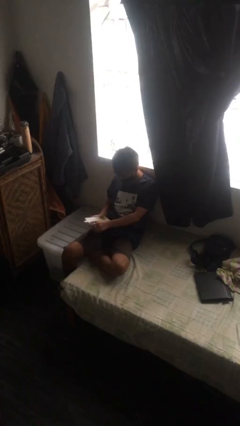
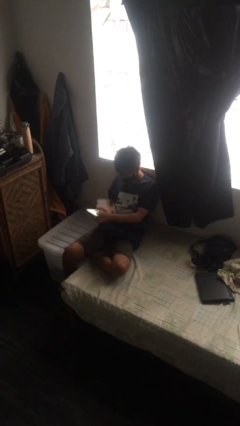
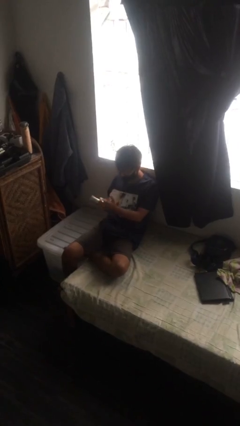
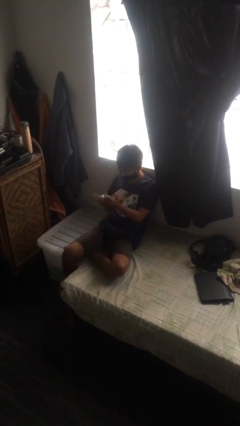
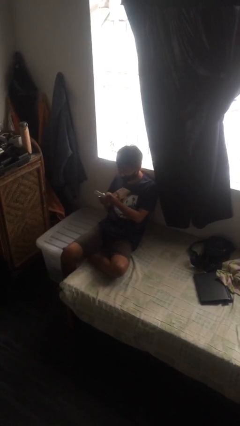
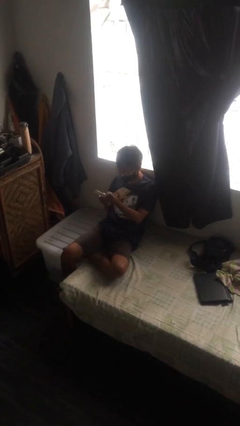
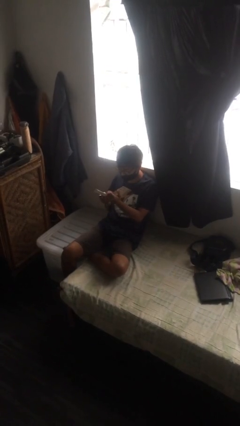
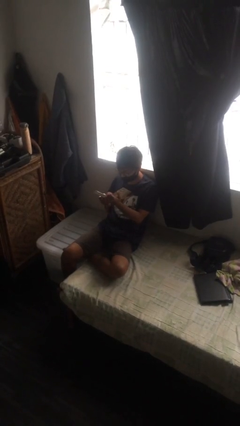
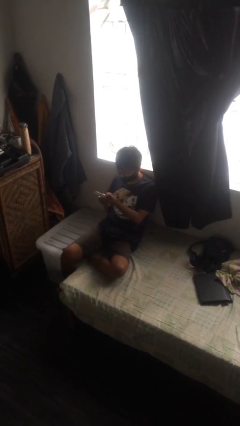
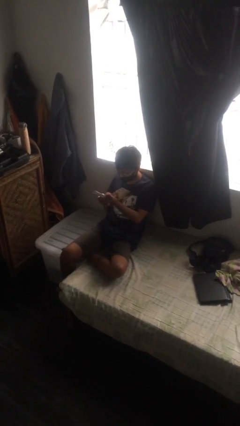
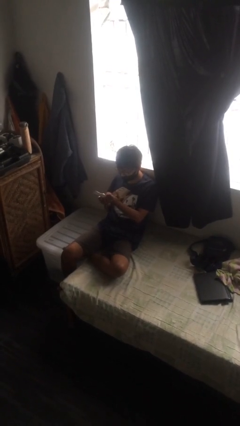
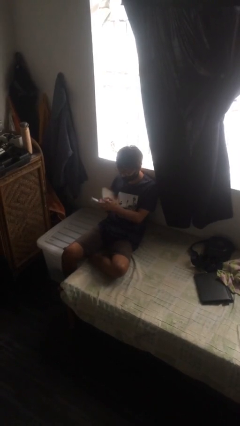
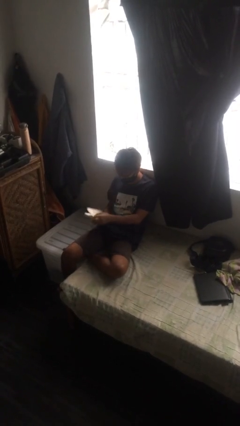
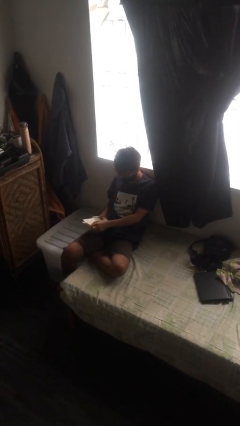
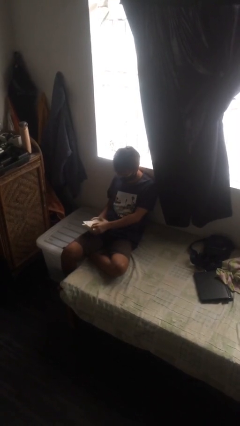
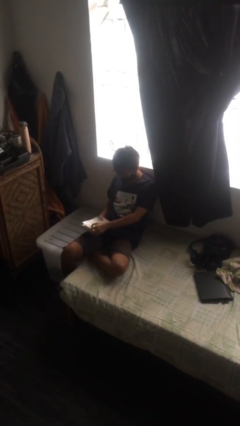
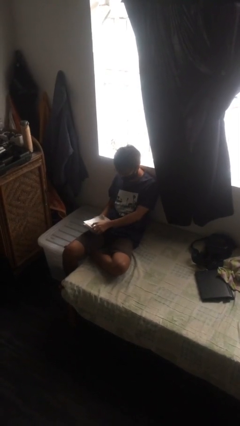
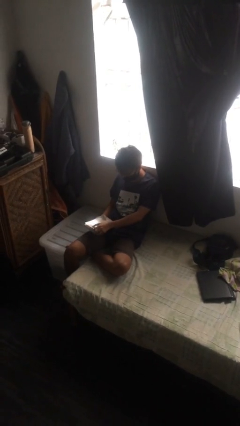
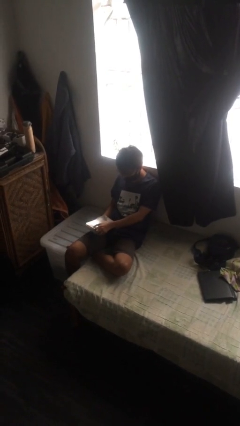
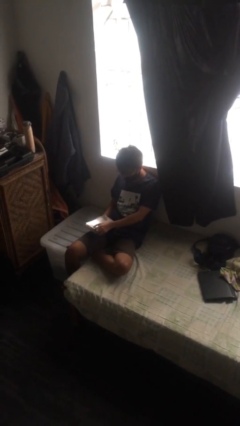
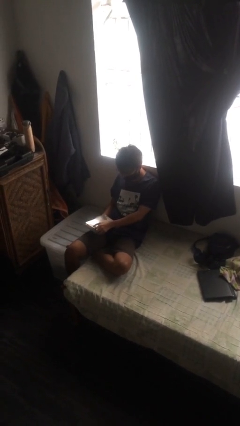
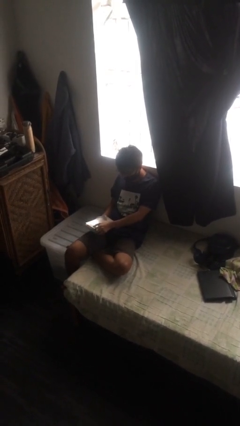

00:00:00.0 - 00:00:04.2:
person reads document

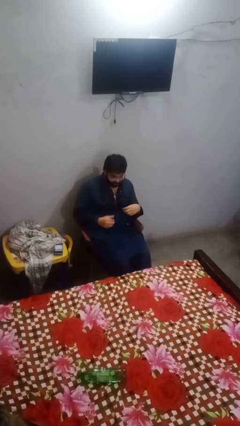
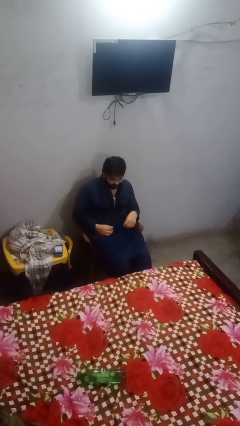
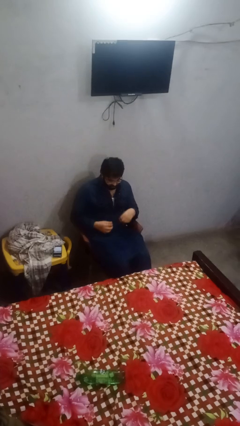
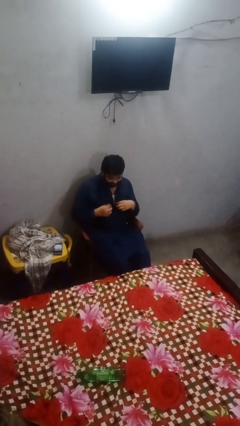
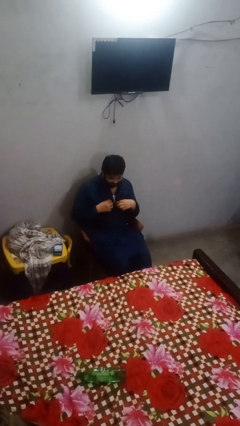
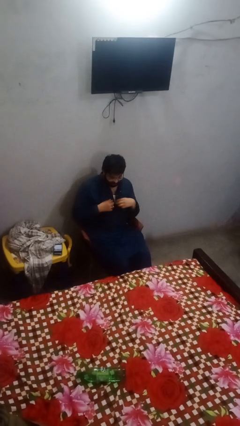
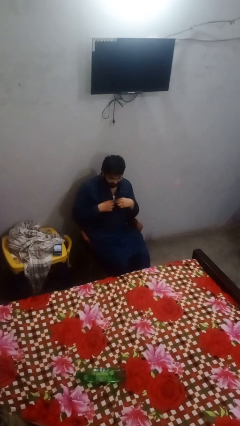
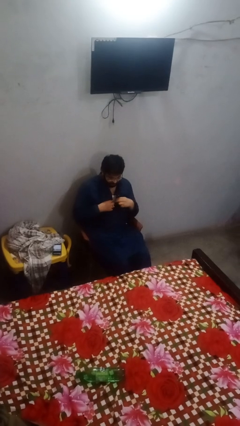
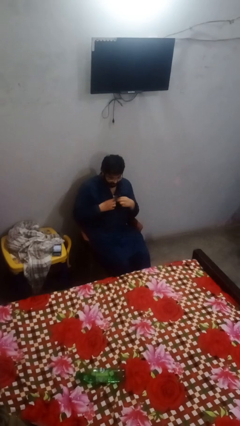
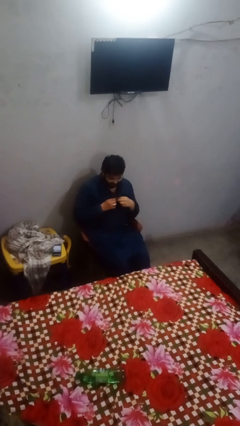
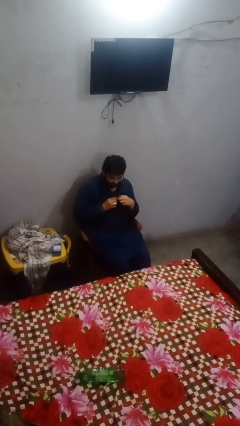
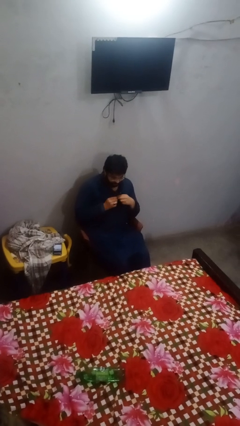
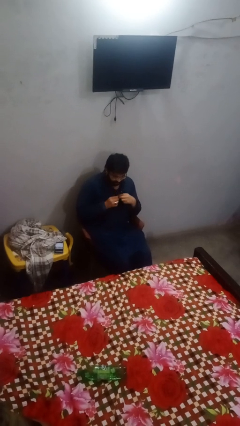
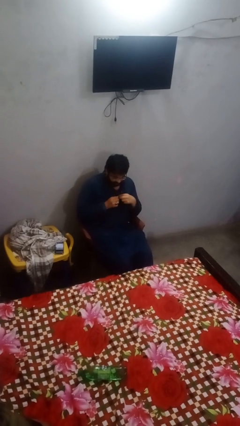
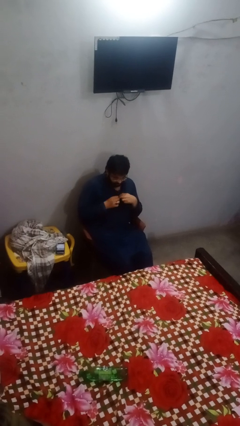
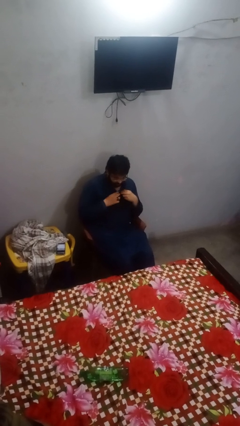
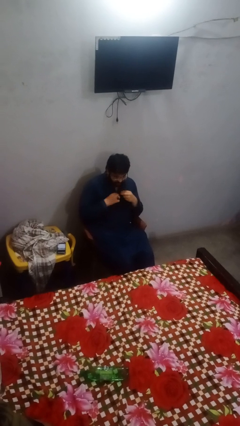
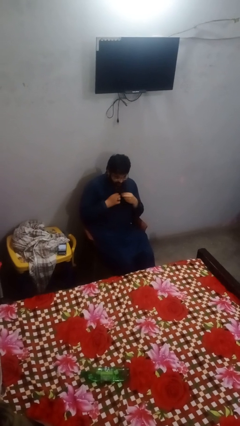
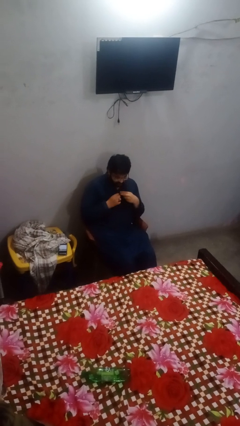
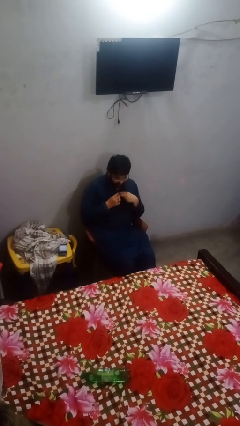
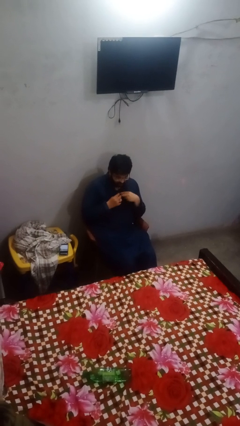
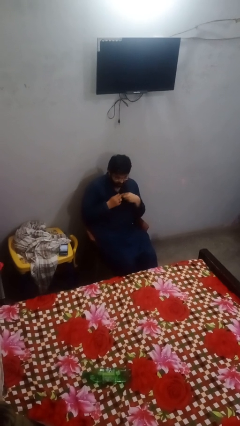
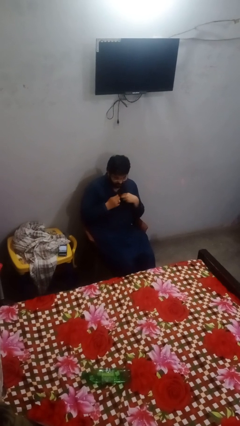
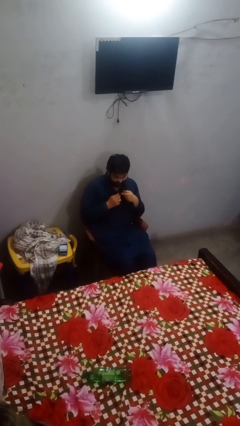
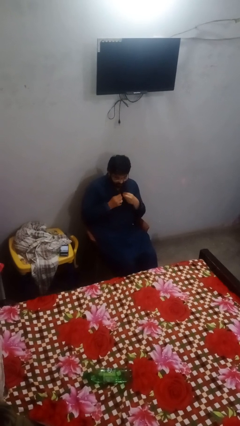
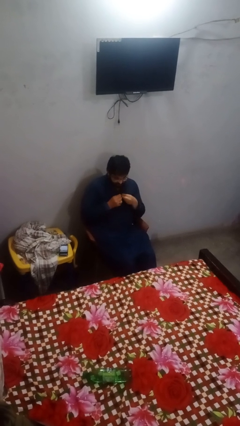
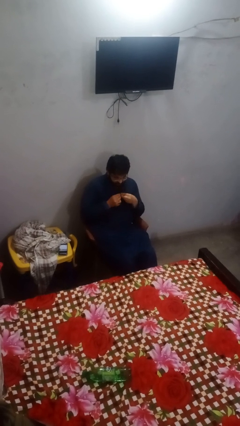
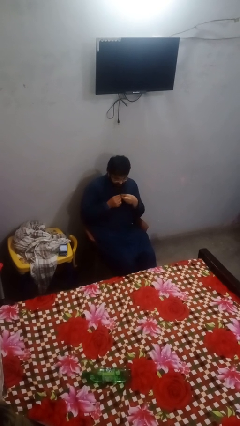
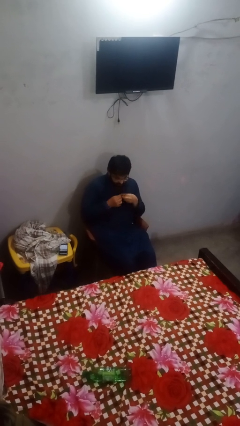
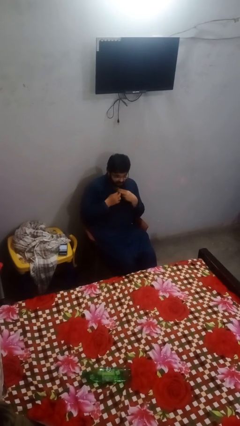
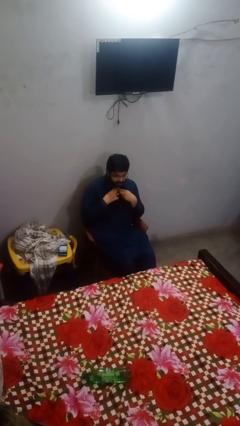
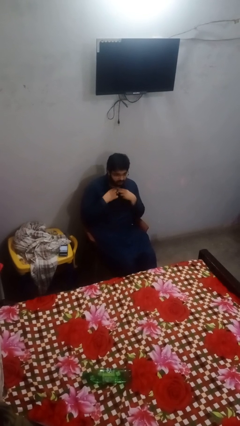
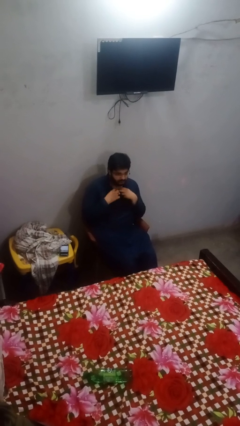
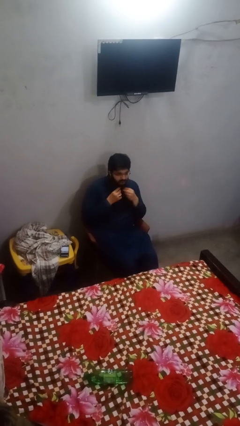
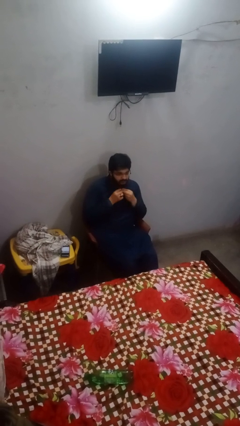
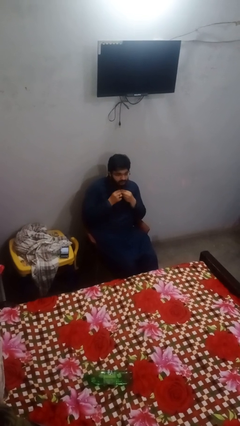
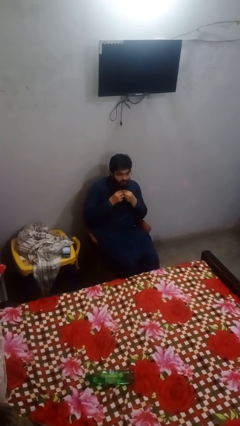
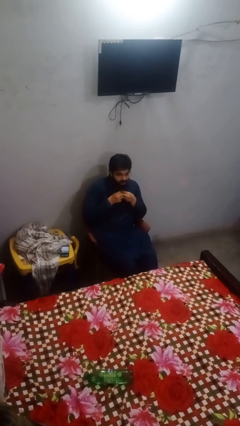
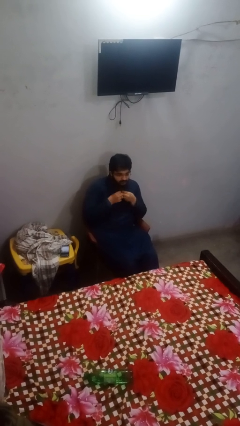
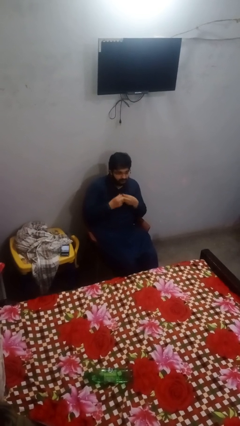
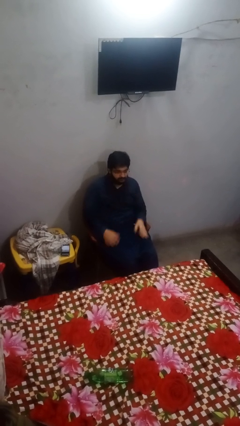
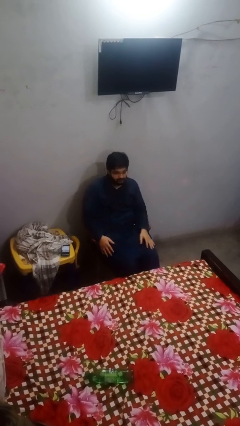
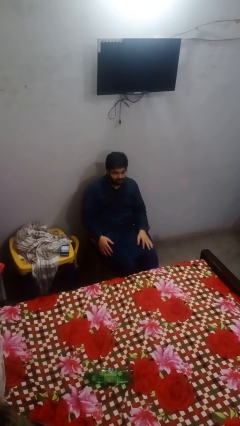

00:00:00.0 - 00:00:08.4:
person buttons shirt

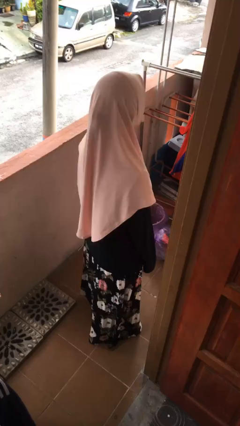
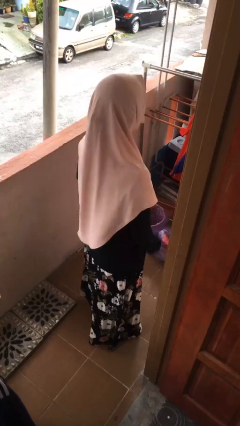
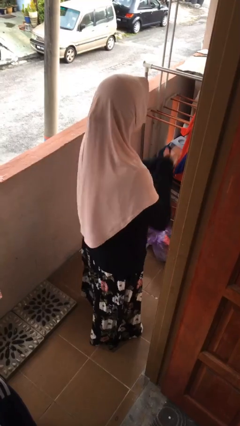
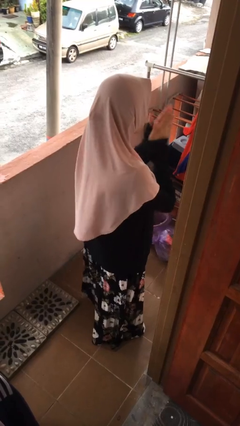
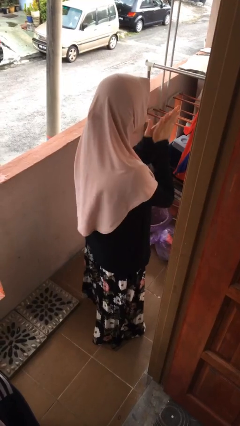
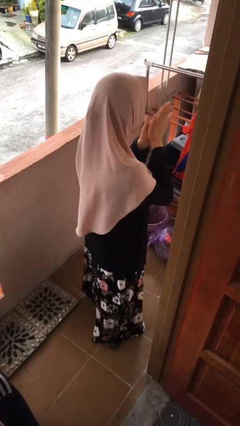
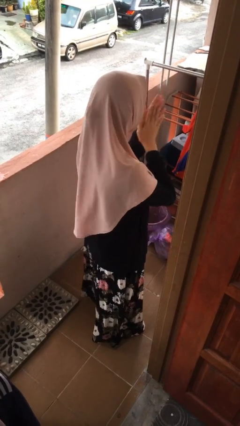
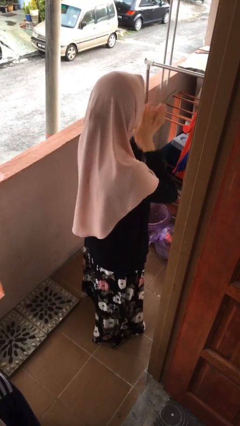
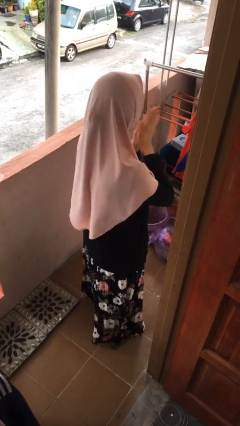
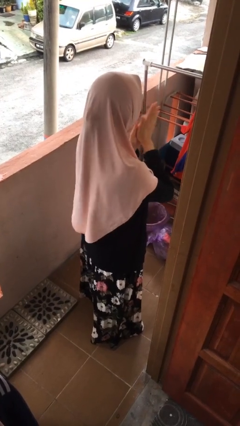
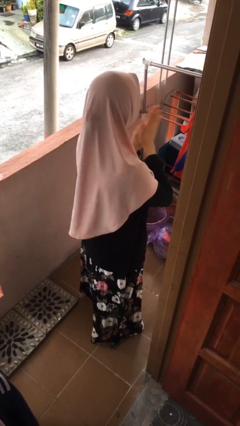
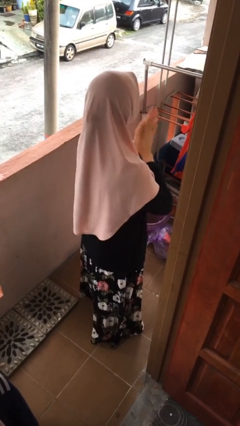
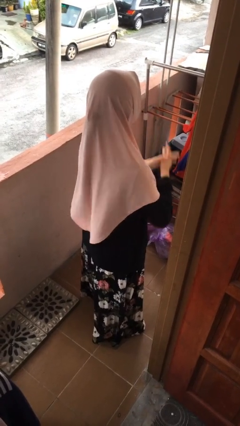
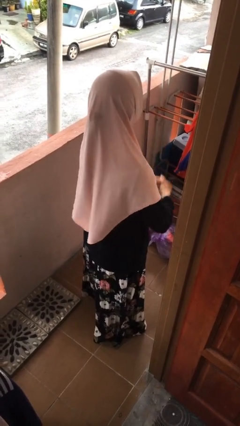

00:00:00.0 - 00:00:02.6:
person blows into hands

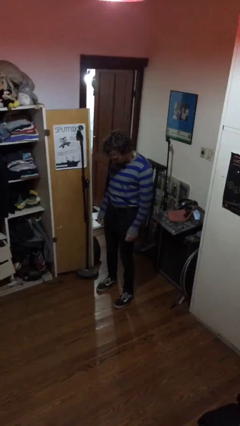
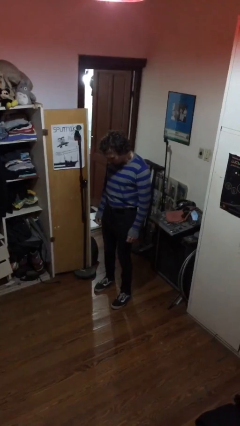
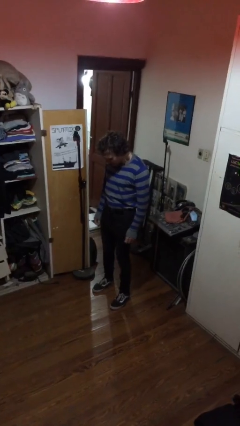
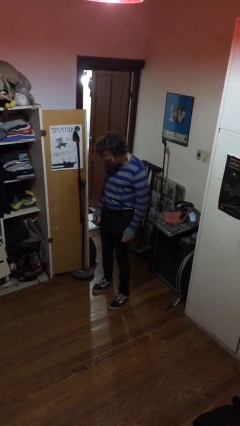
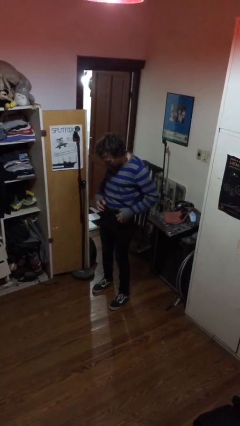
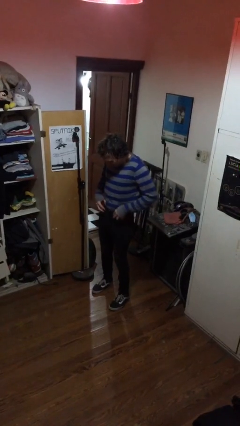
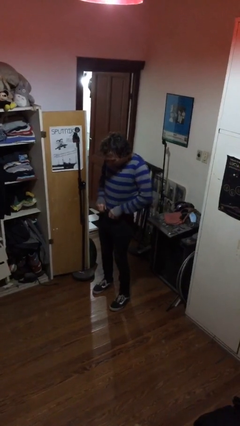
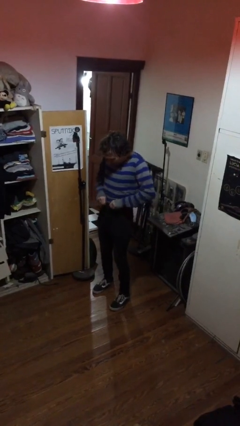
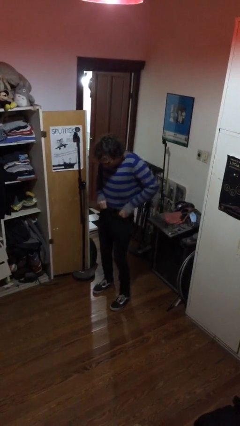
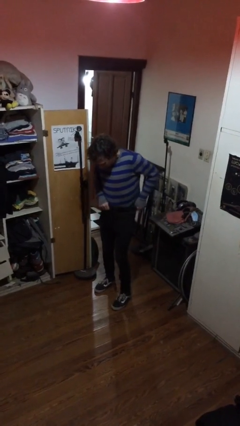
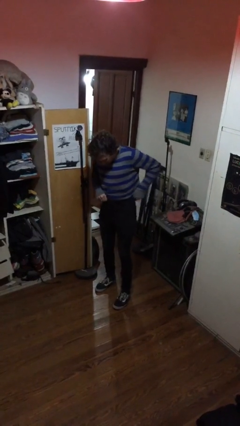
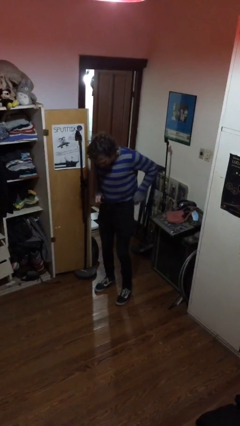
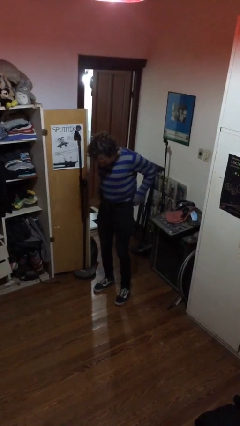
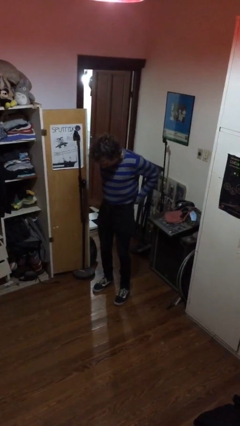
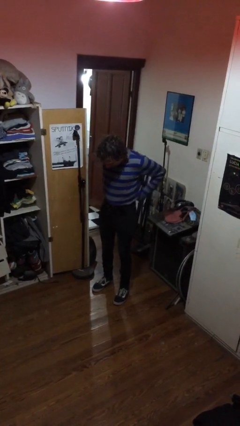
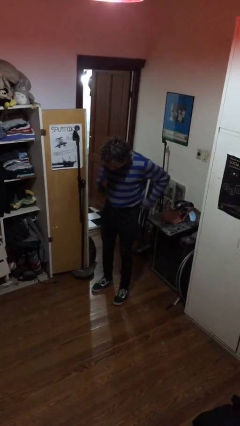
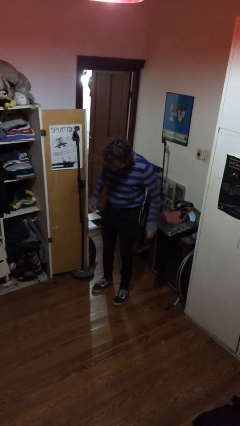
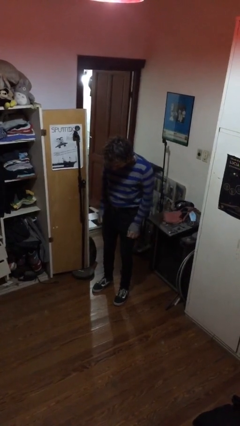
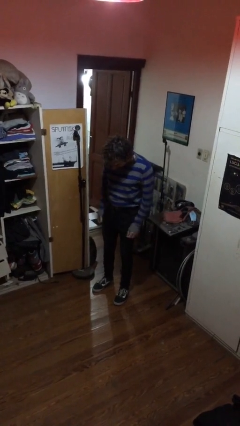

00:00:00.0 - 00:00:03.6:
person hikes up pants
